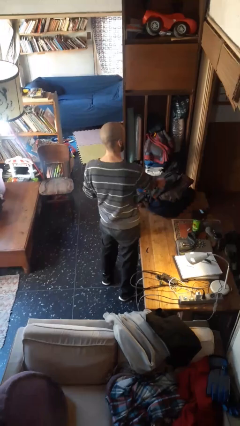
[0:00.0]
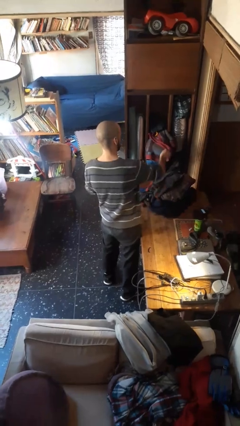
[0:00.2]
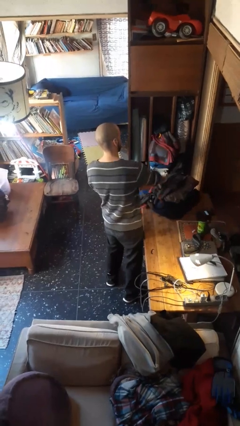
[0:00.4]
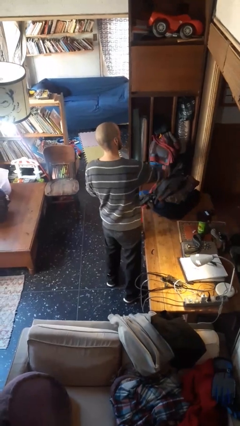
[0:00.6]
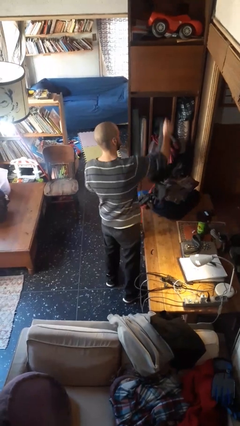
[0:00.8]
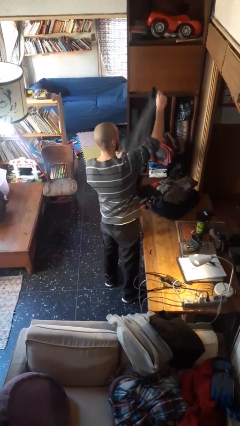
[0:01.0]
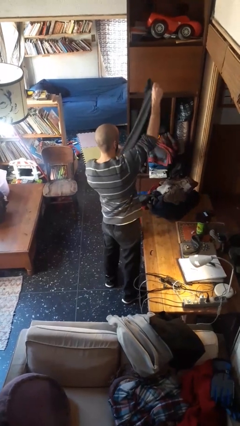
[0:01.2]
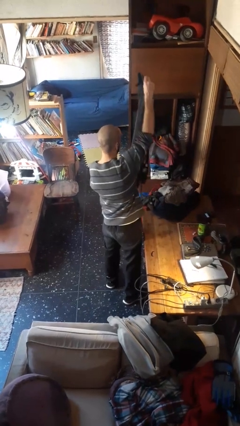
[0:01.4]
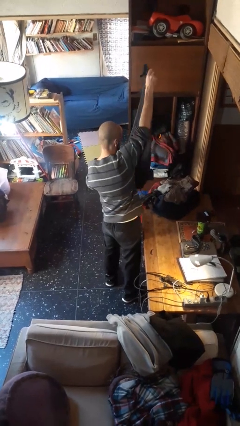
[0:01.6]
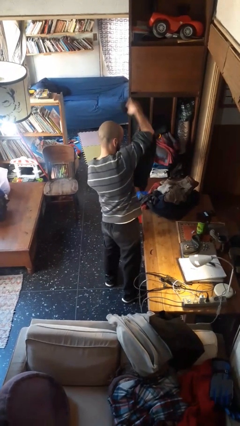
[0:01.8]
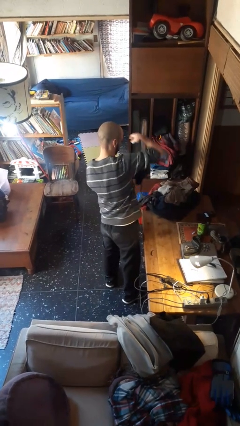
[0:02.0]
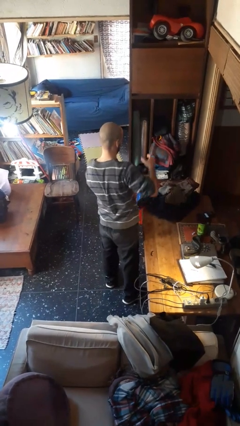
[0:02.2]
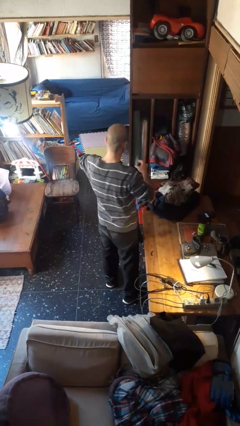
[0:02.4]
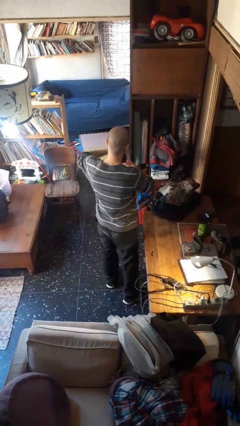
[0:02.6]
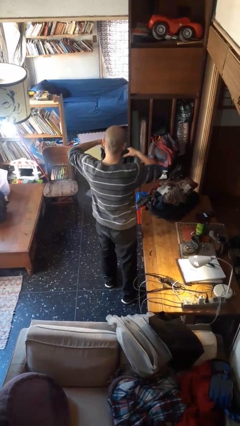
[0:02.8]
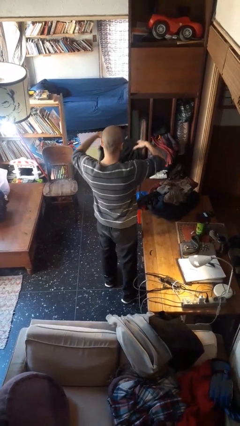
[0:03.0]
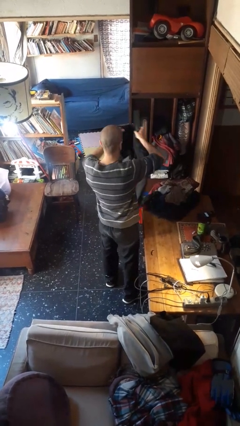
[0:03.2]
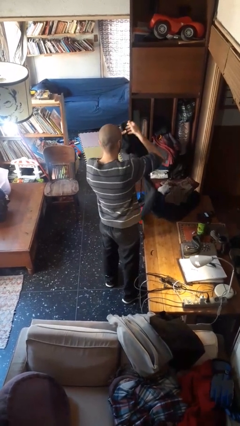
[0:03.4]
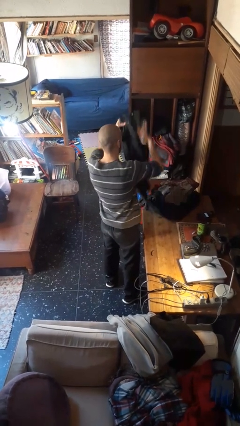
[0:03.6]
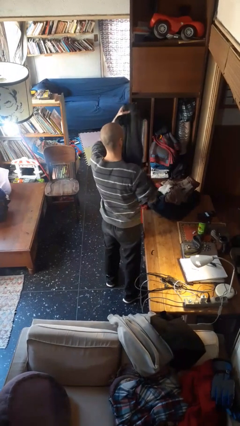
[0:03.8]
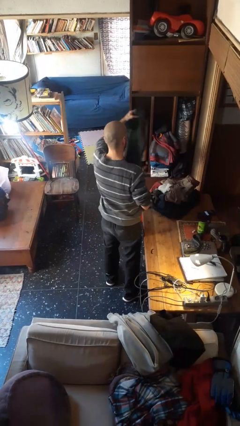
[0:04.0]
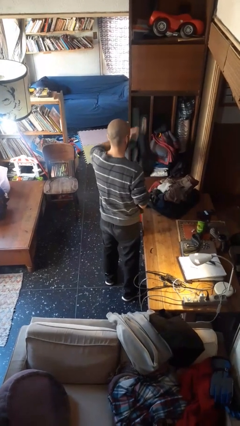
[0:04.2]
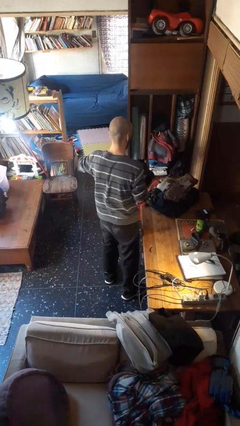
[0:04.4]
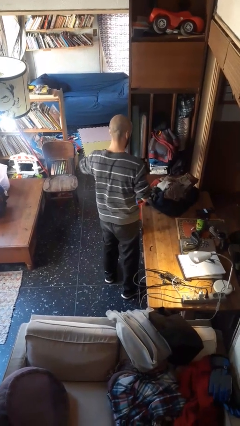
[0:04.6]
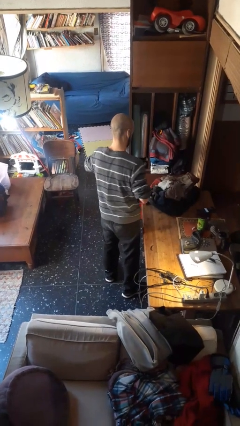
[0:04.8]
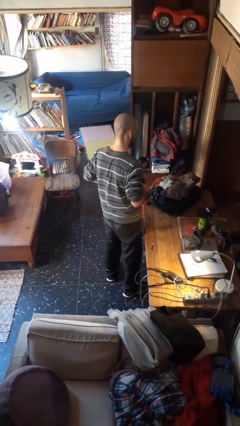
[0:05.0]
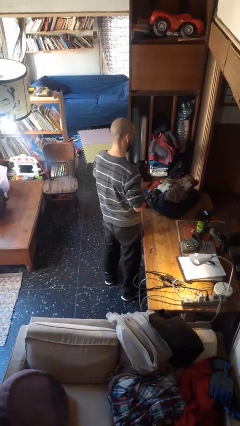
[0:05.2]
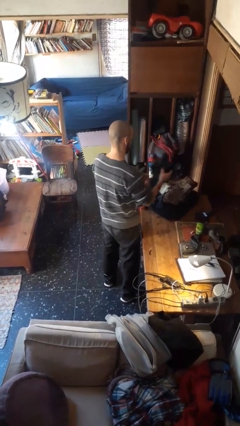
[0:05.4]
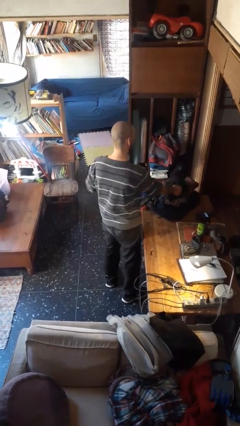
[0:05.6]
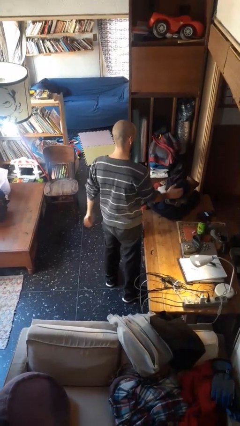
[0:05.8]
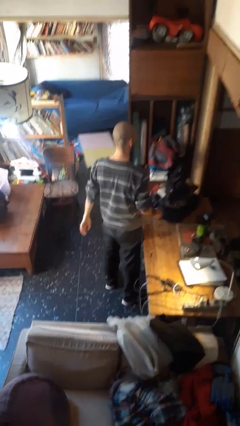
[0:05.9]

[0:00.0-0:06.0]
person folds pants

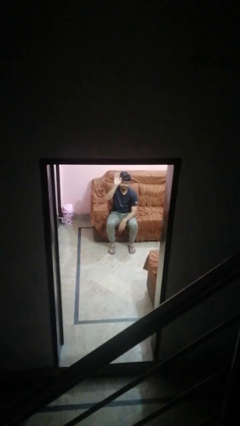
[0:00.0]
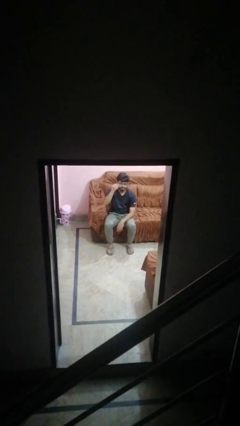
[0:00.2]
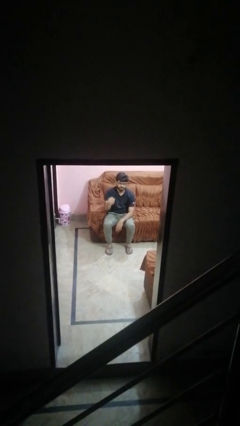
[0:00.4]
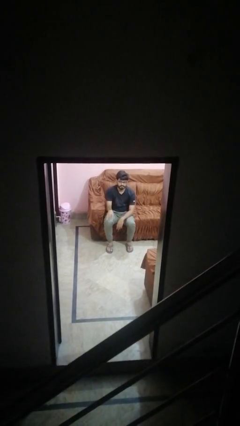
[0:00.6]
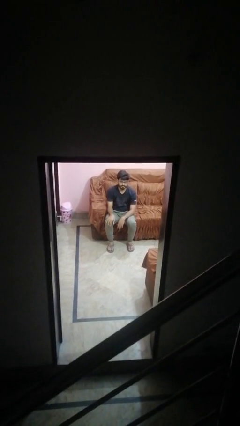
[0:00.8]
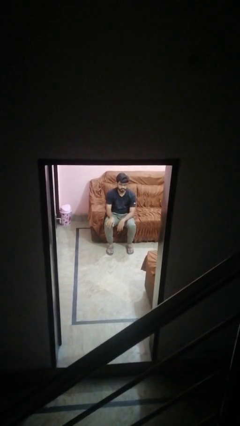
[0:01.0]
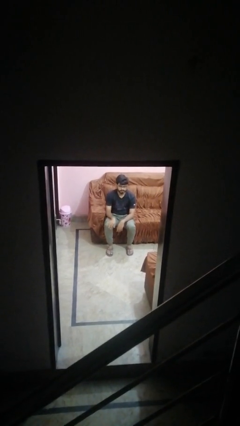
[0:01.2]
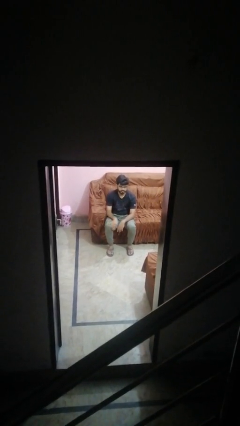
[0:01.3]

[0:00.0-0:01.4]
person gestures lower hand

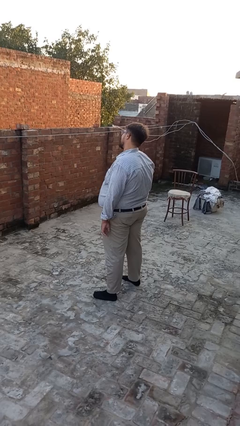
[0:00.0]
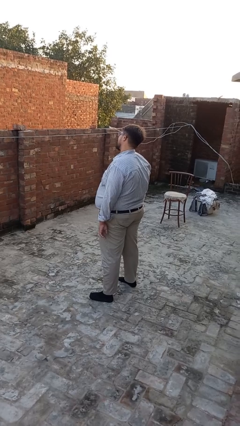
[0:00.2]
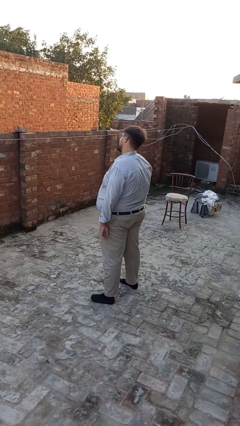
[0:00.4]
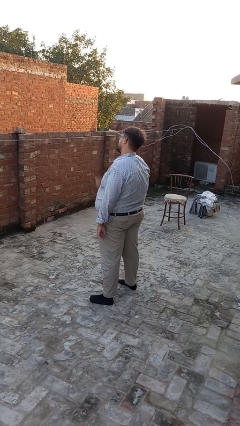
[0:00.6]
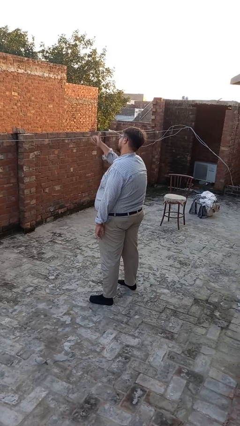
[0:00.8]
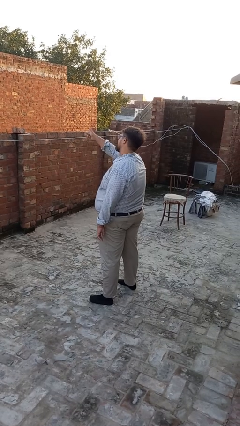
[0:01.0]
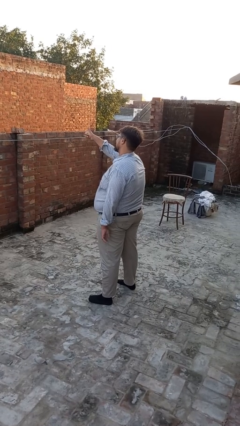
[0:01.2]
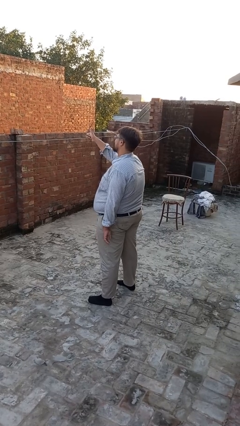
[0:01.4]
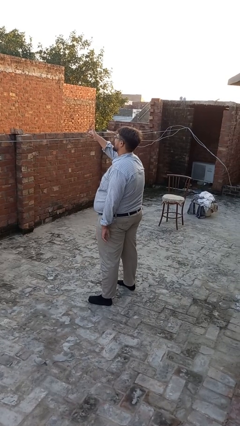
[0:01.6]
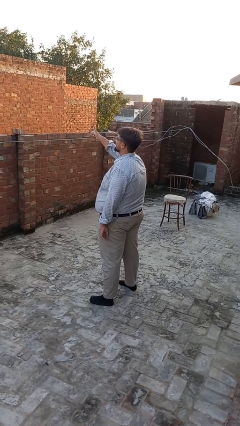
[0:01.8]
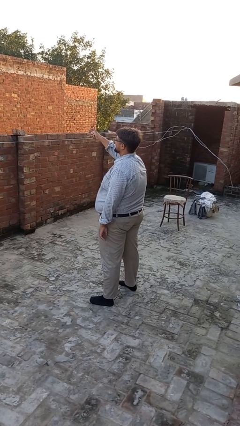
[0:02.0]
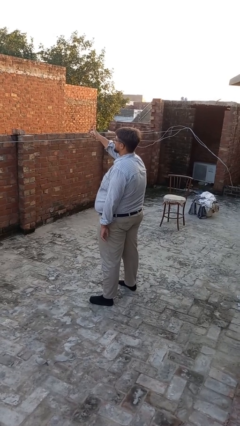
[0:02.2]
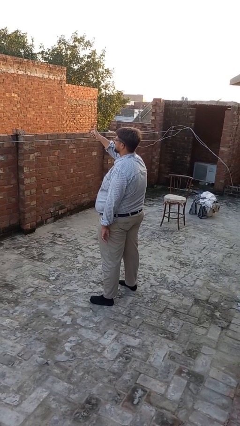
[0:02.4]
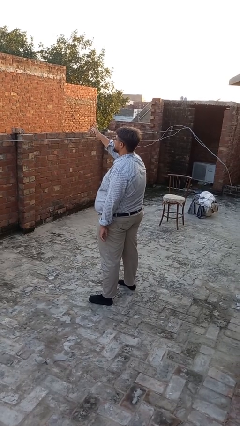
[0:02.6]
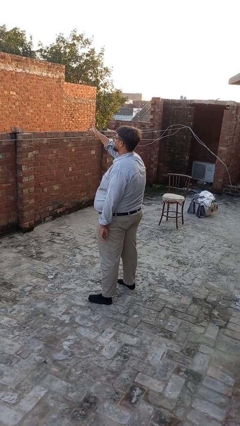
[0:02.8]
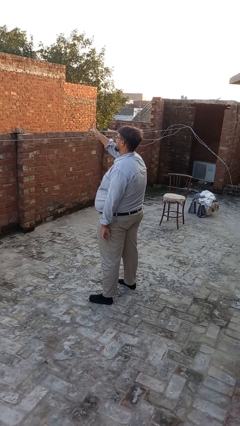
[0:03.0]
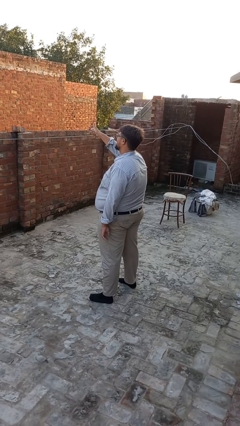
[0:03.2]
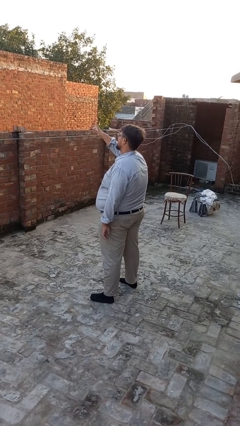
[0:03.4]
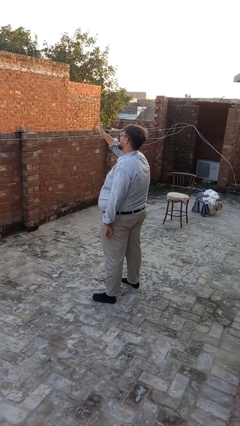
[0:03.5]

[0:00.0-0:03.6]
person gestures thumbs up

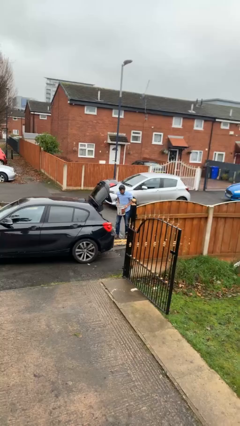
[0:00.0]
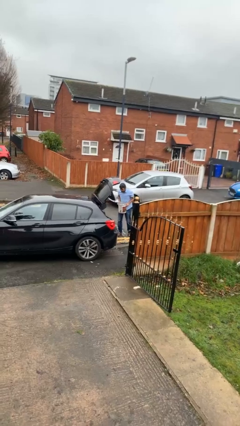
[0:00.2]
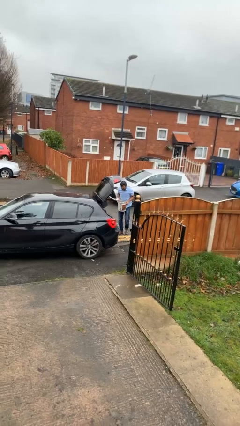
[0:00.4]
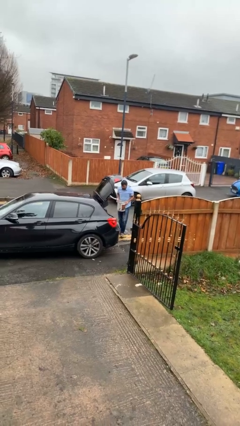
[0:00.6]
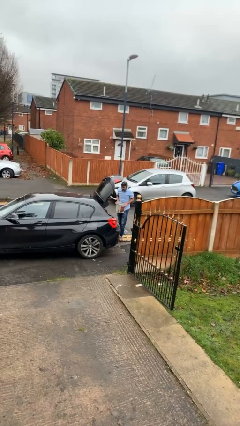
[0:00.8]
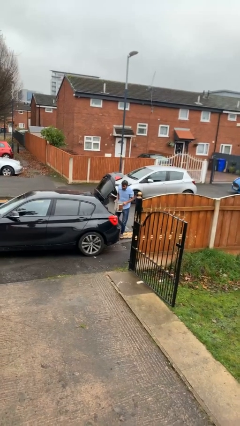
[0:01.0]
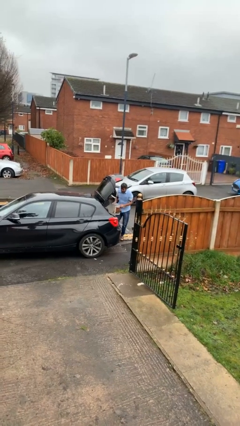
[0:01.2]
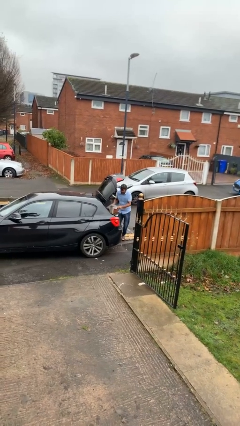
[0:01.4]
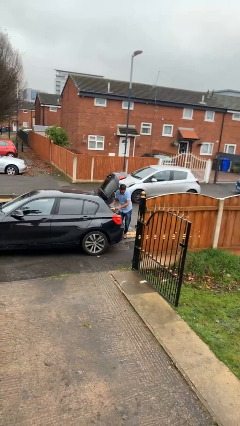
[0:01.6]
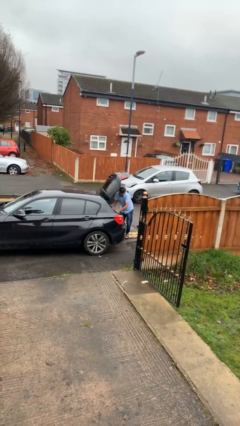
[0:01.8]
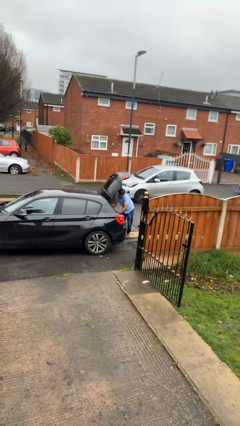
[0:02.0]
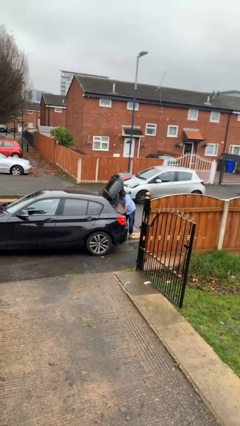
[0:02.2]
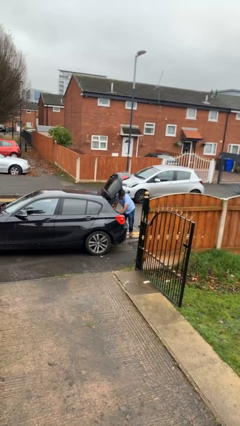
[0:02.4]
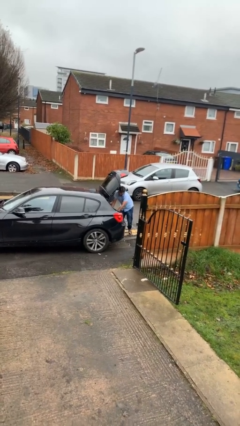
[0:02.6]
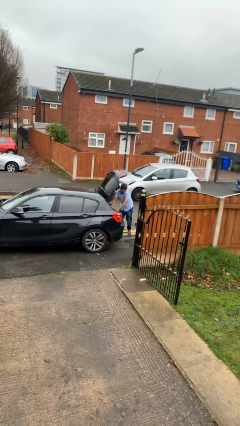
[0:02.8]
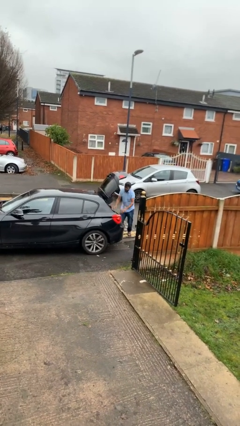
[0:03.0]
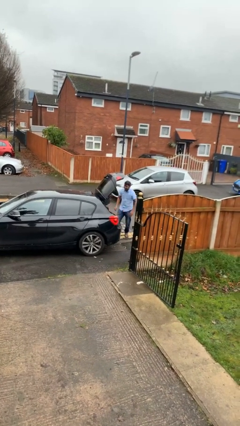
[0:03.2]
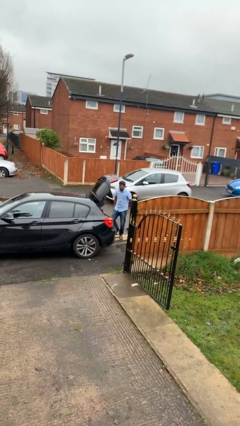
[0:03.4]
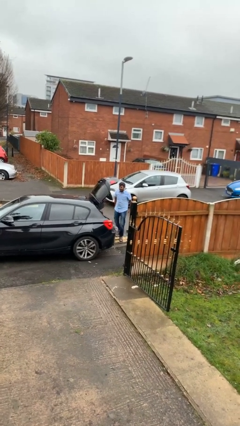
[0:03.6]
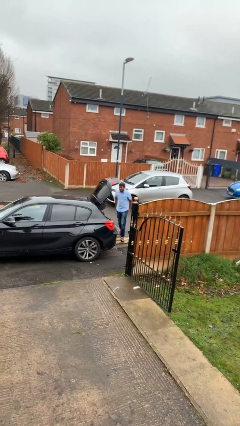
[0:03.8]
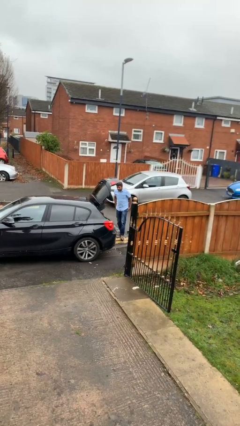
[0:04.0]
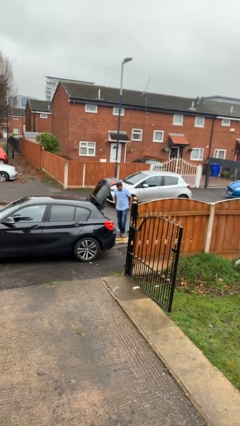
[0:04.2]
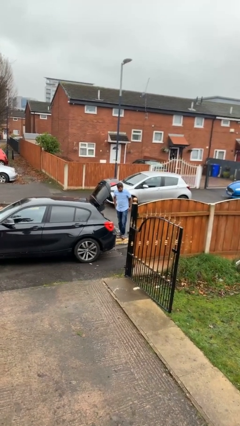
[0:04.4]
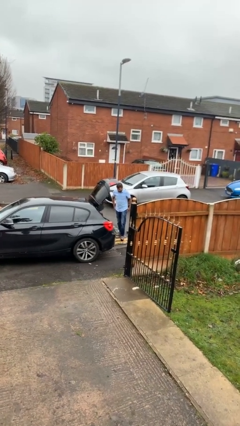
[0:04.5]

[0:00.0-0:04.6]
person loads car

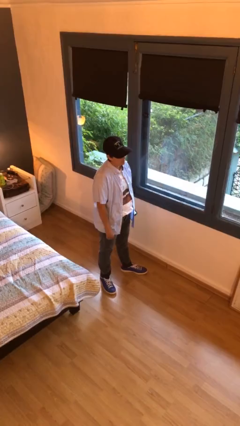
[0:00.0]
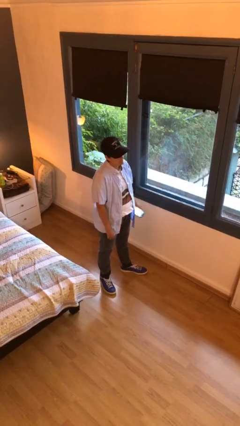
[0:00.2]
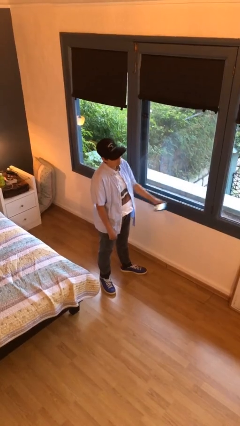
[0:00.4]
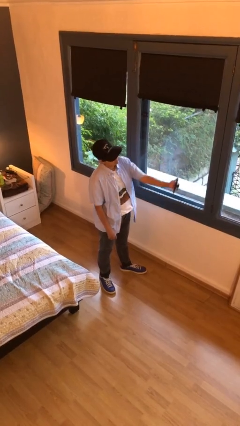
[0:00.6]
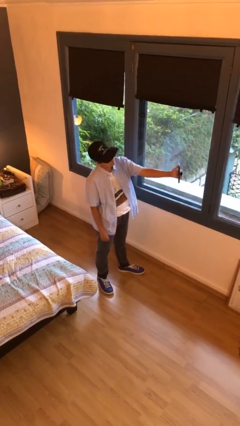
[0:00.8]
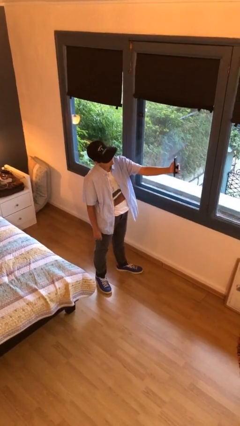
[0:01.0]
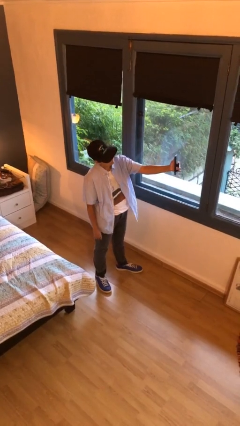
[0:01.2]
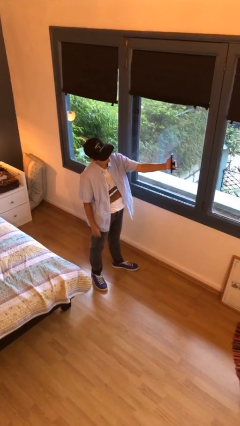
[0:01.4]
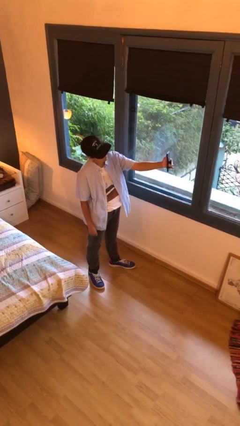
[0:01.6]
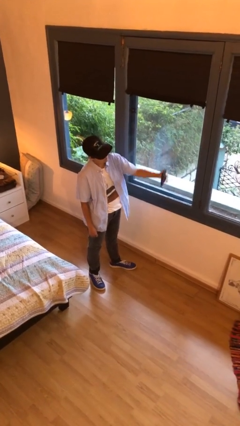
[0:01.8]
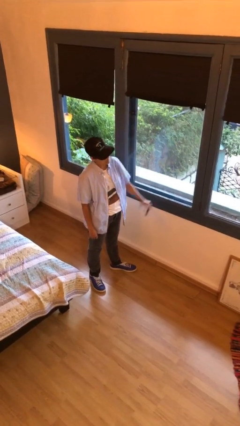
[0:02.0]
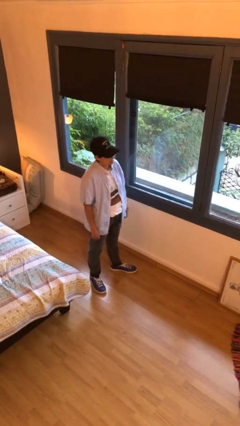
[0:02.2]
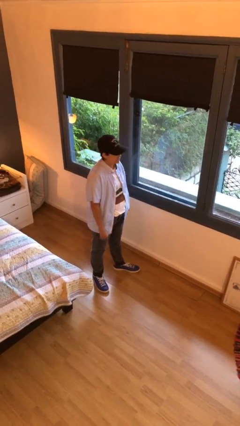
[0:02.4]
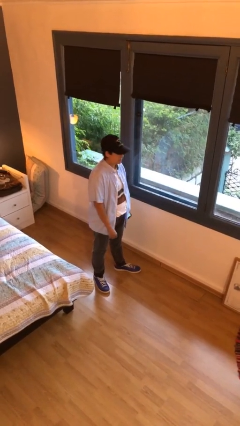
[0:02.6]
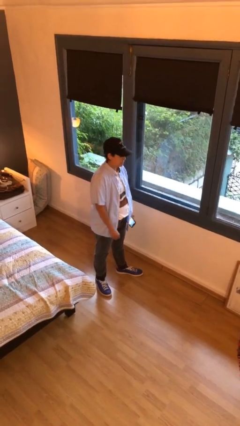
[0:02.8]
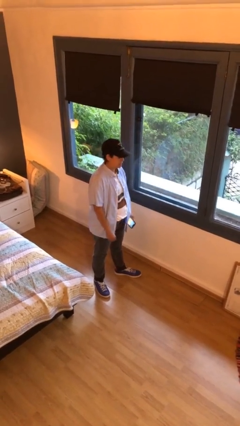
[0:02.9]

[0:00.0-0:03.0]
person takes selfie
